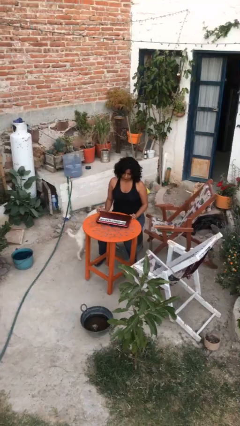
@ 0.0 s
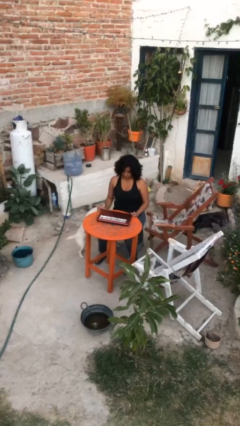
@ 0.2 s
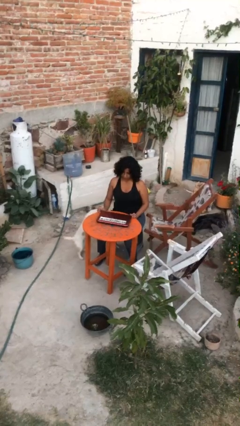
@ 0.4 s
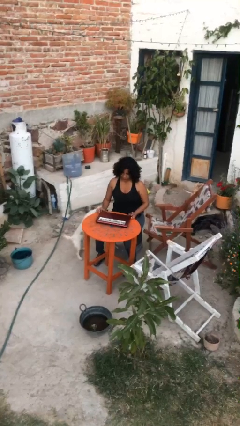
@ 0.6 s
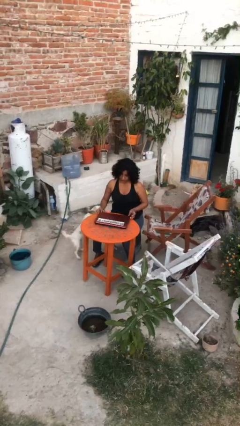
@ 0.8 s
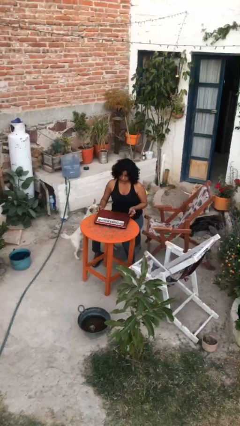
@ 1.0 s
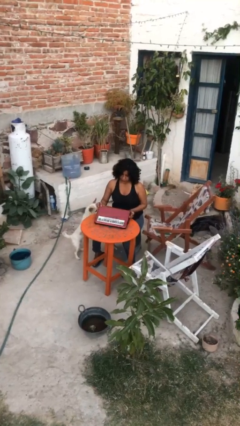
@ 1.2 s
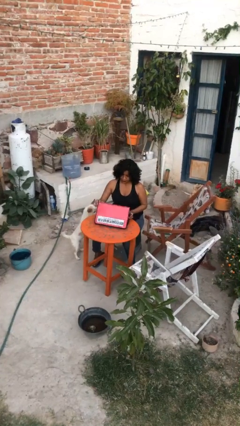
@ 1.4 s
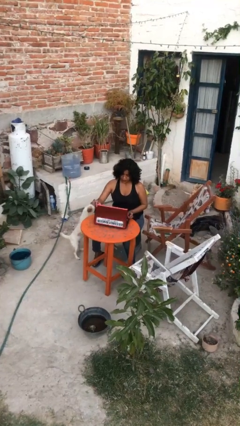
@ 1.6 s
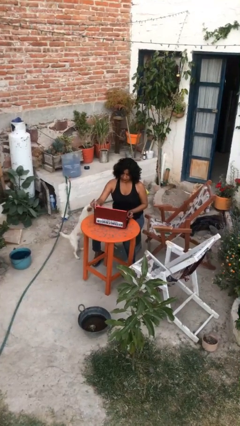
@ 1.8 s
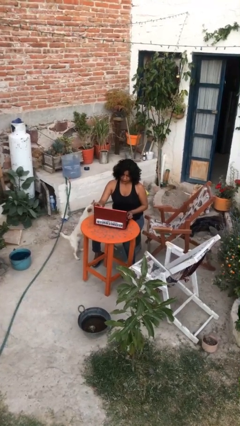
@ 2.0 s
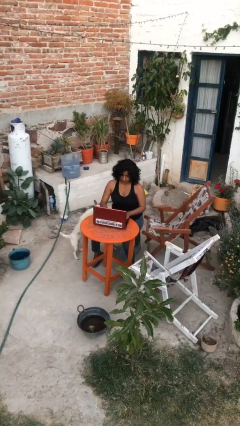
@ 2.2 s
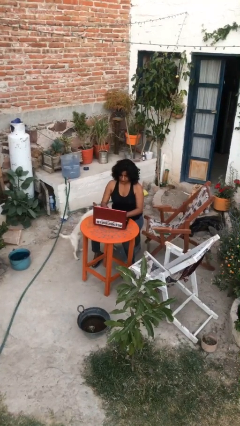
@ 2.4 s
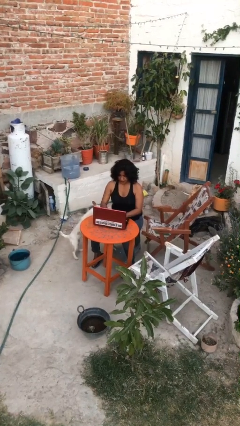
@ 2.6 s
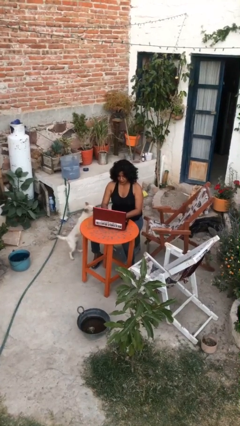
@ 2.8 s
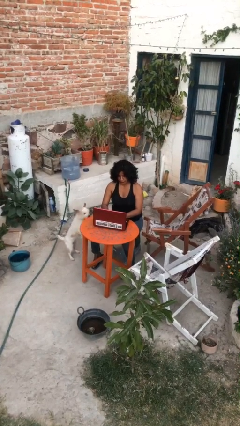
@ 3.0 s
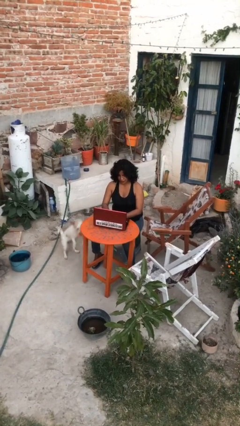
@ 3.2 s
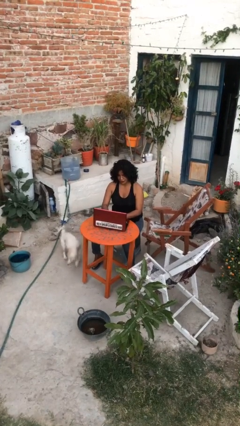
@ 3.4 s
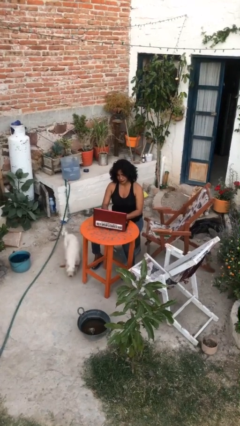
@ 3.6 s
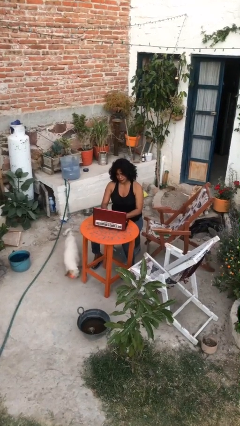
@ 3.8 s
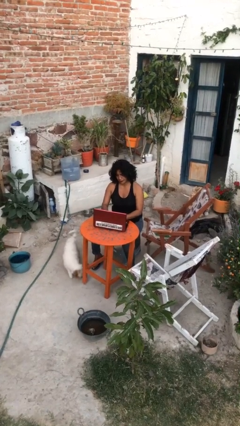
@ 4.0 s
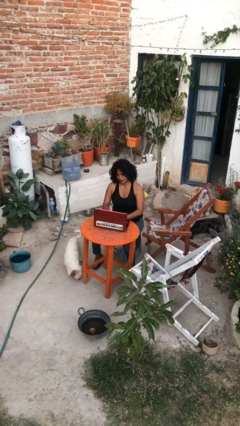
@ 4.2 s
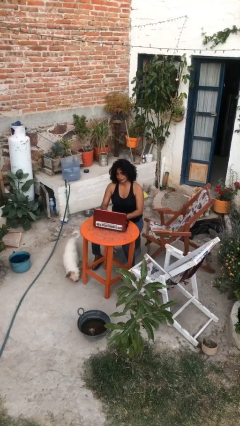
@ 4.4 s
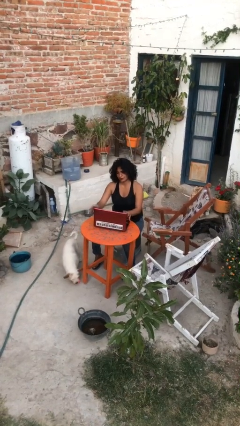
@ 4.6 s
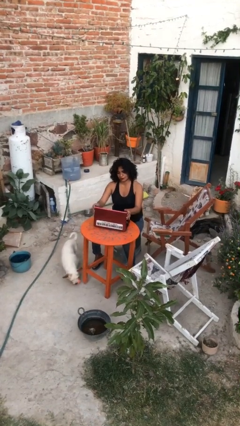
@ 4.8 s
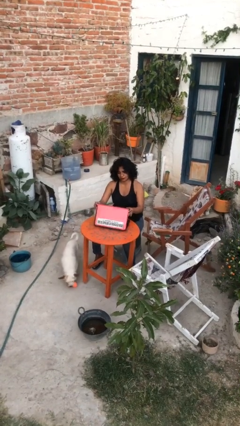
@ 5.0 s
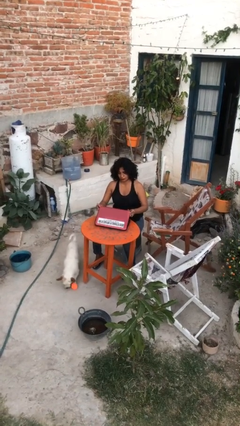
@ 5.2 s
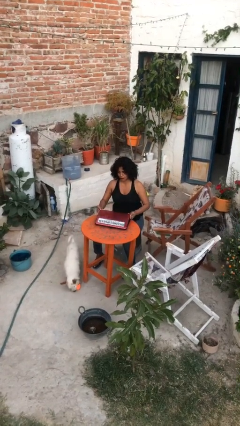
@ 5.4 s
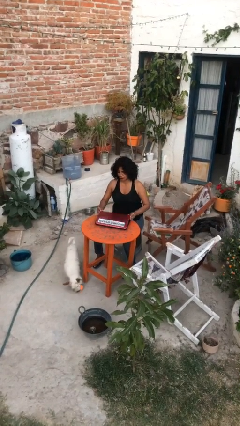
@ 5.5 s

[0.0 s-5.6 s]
person interacts with laptop

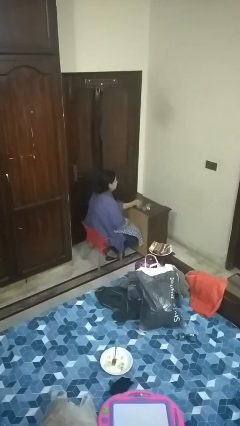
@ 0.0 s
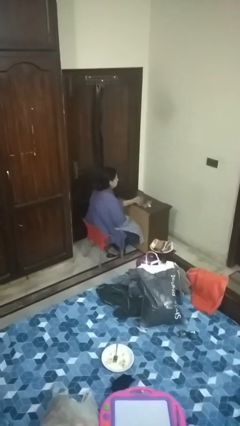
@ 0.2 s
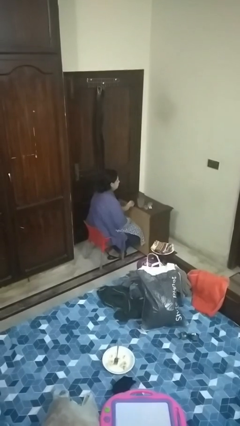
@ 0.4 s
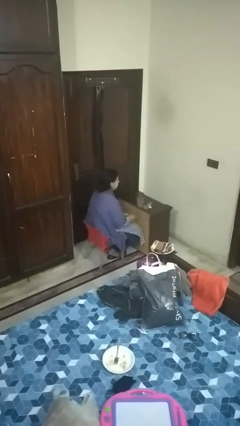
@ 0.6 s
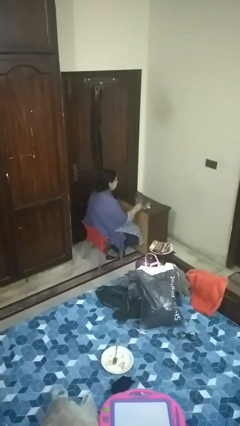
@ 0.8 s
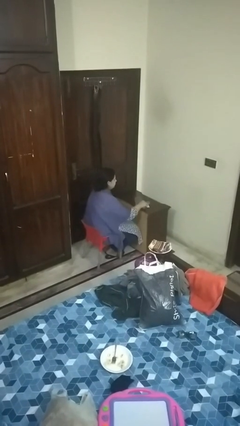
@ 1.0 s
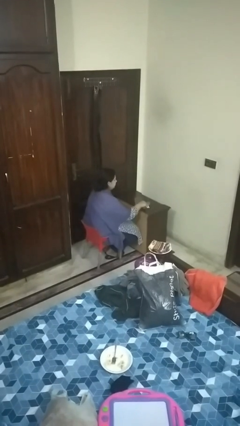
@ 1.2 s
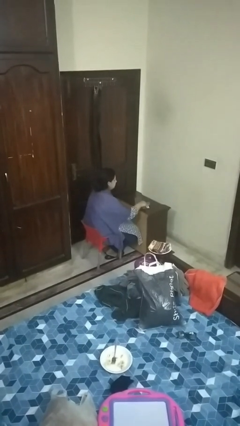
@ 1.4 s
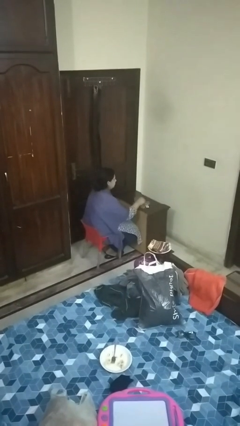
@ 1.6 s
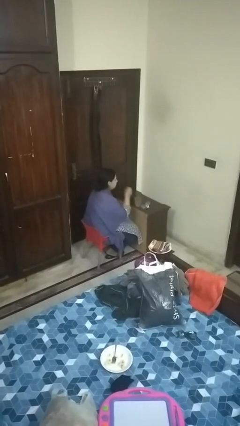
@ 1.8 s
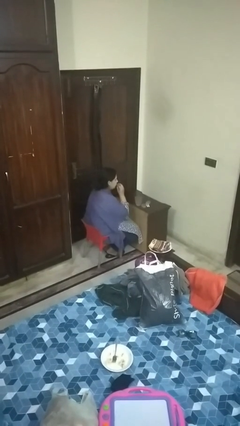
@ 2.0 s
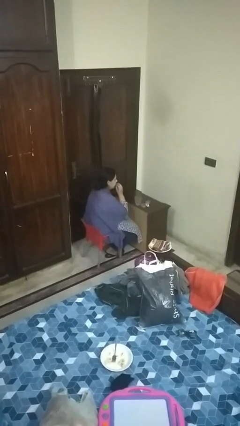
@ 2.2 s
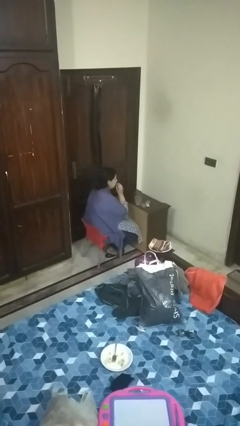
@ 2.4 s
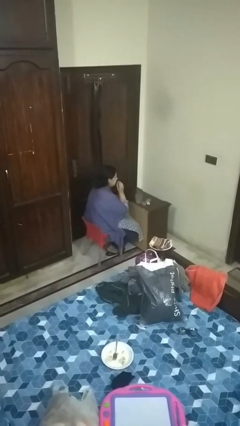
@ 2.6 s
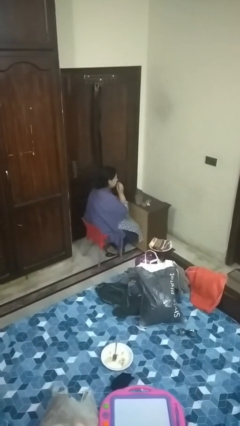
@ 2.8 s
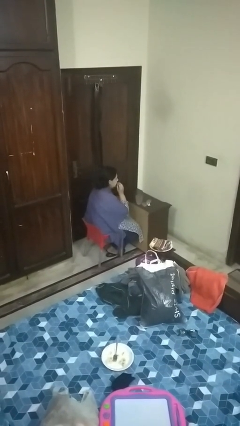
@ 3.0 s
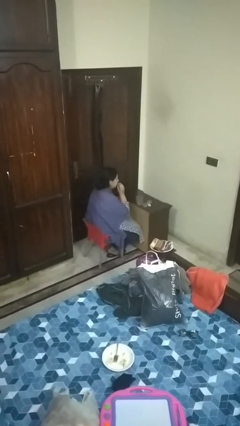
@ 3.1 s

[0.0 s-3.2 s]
person takes medicine pills

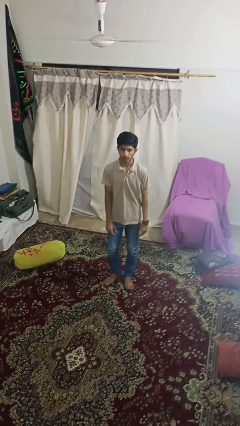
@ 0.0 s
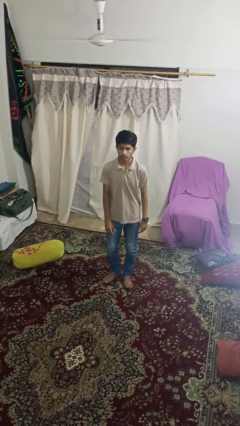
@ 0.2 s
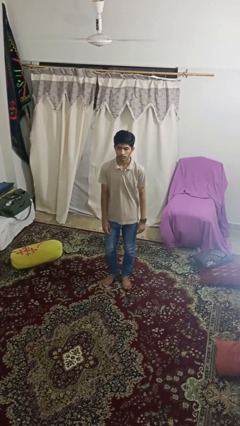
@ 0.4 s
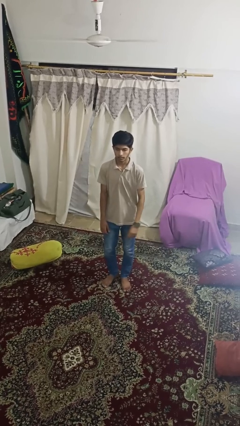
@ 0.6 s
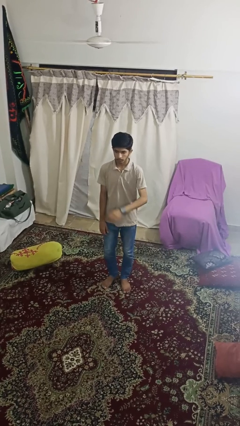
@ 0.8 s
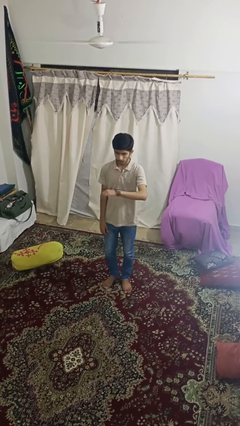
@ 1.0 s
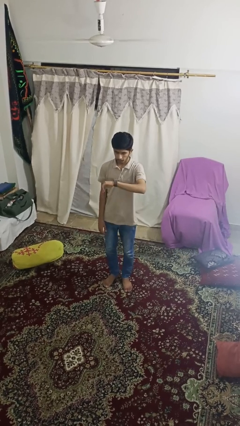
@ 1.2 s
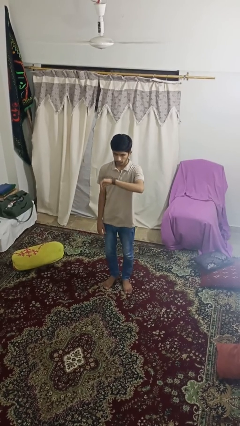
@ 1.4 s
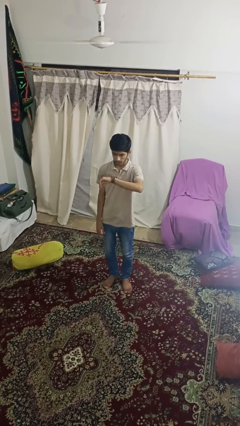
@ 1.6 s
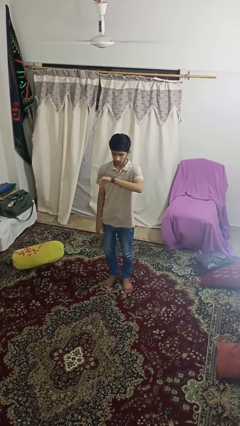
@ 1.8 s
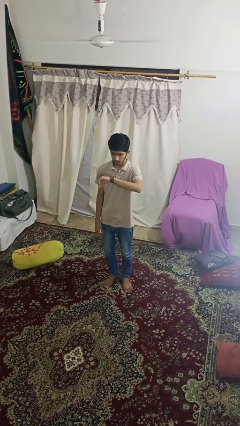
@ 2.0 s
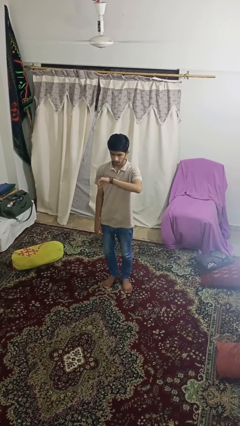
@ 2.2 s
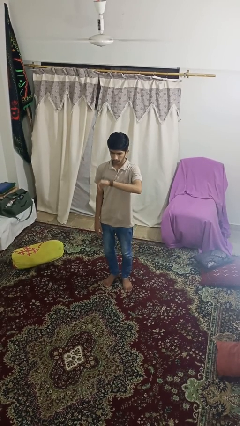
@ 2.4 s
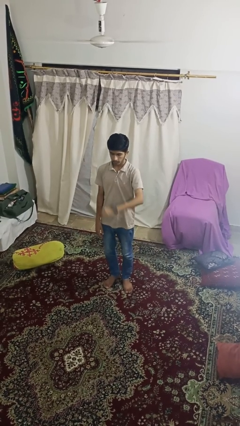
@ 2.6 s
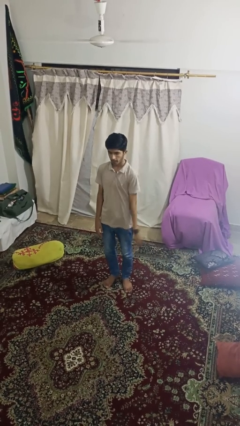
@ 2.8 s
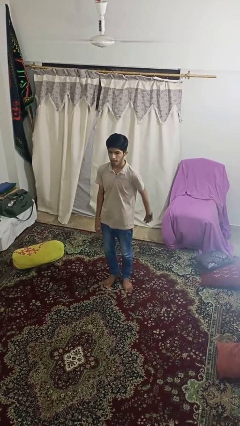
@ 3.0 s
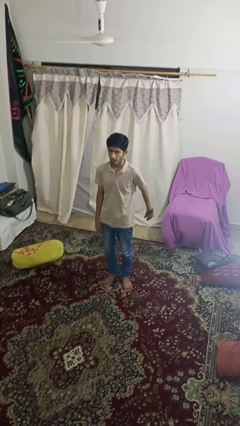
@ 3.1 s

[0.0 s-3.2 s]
person looks at wristwatch

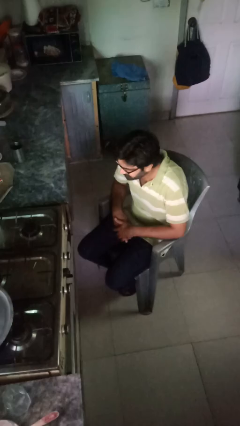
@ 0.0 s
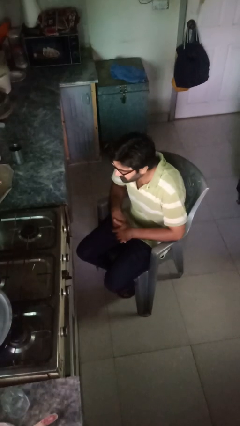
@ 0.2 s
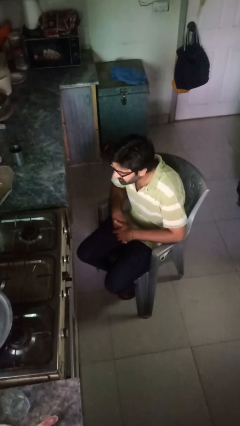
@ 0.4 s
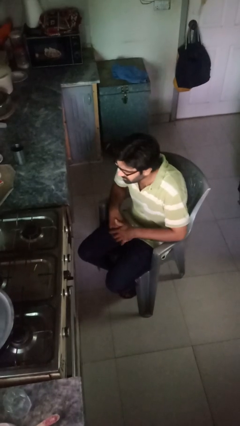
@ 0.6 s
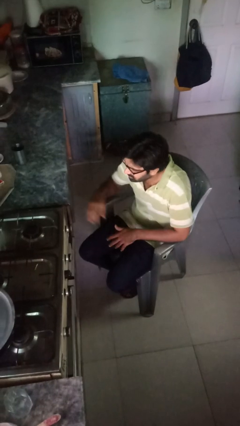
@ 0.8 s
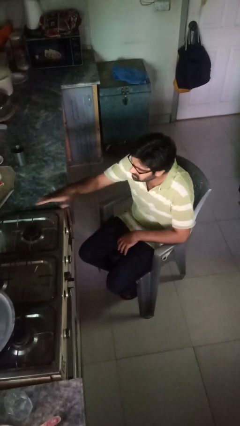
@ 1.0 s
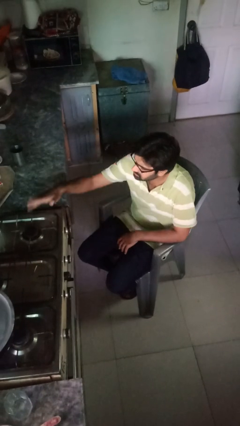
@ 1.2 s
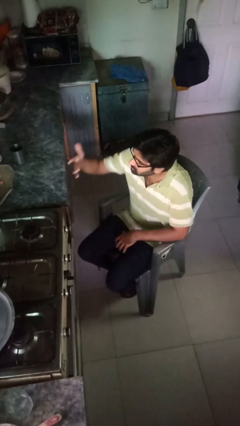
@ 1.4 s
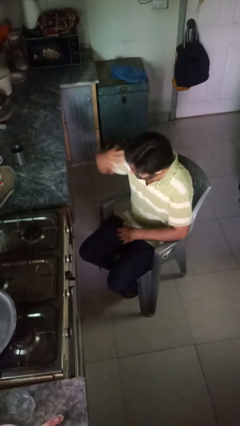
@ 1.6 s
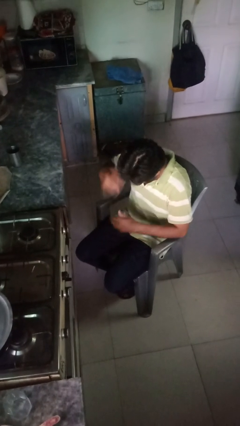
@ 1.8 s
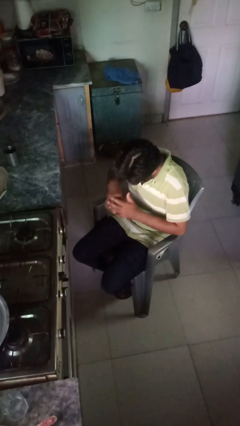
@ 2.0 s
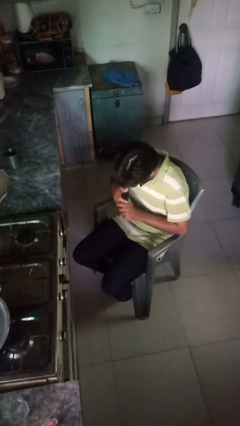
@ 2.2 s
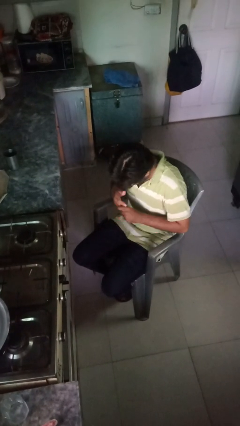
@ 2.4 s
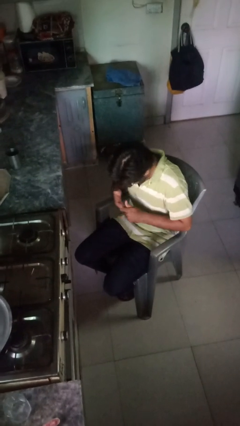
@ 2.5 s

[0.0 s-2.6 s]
person burns hand

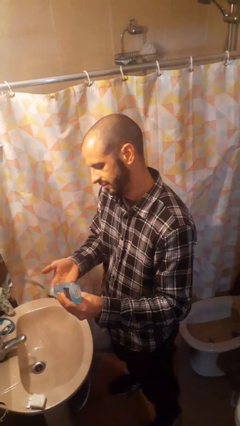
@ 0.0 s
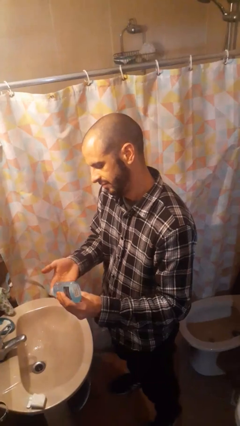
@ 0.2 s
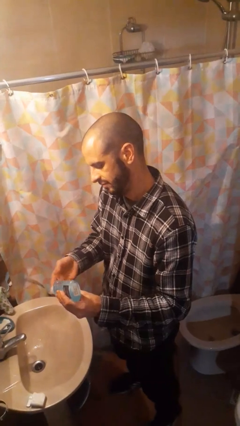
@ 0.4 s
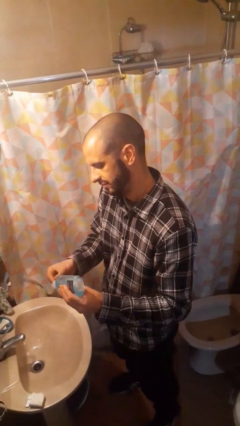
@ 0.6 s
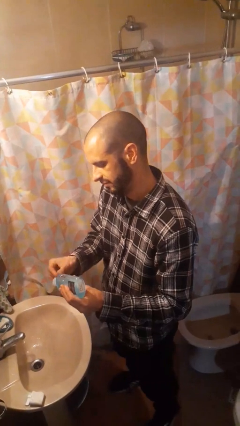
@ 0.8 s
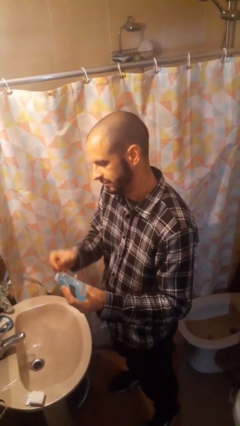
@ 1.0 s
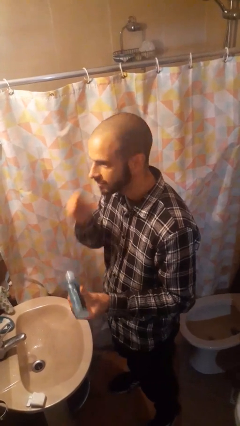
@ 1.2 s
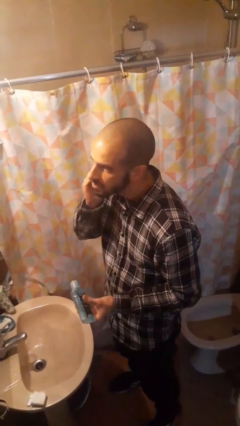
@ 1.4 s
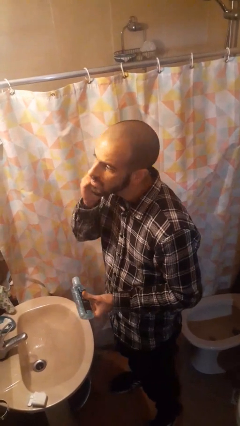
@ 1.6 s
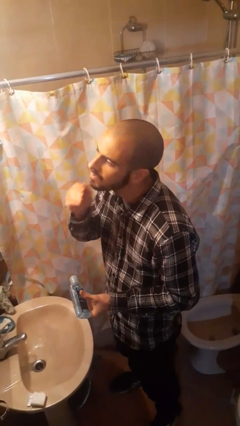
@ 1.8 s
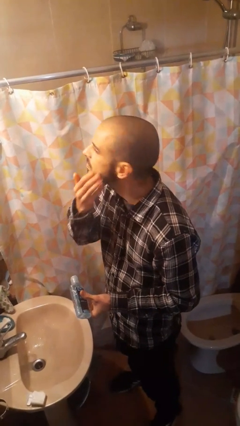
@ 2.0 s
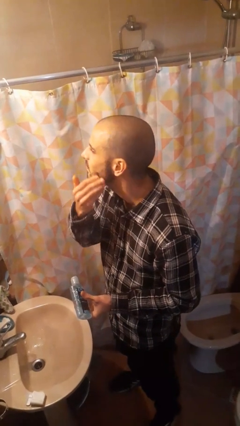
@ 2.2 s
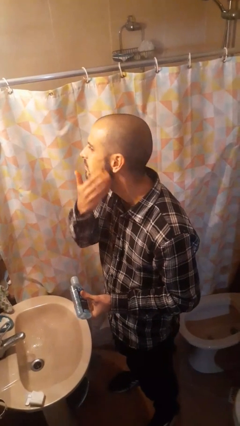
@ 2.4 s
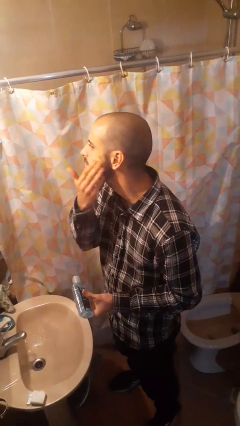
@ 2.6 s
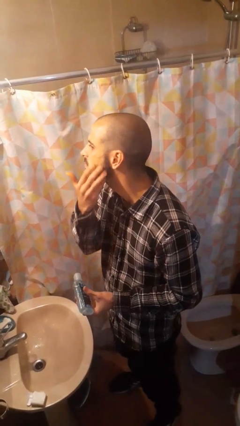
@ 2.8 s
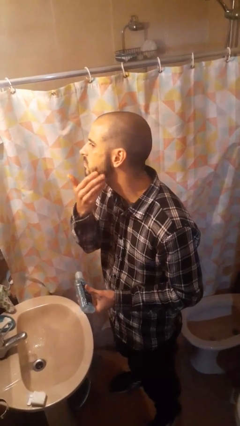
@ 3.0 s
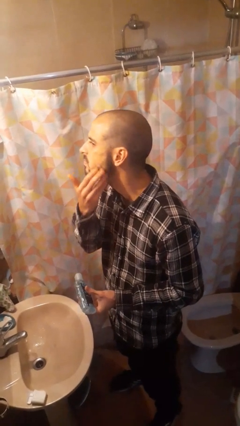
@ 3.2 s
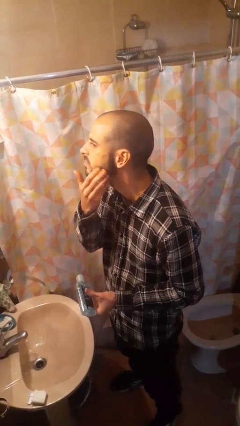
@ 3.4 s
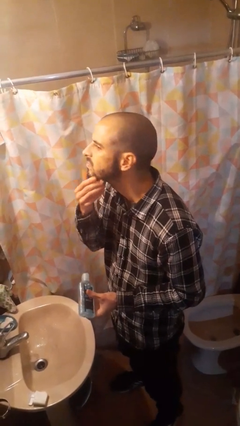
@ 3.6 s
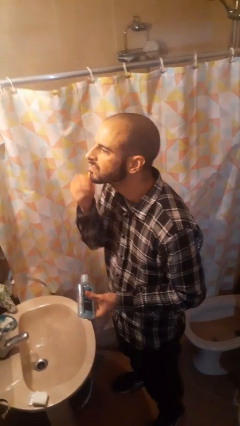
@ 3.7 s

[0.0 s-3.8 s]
person applies facial moisturizer
